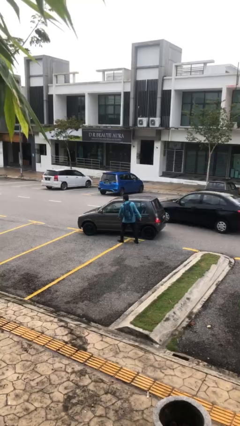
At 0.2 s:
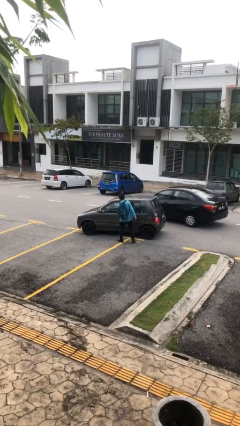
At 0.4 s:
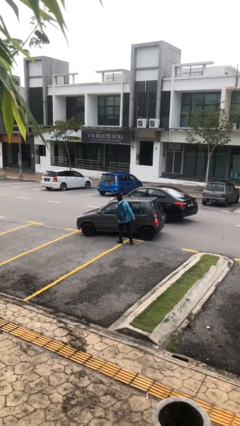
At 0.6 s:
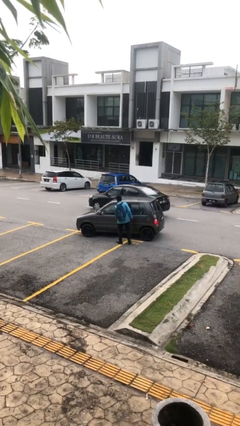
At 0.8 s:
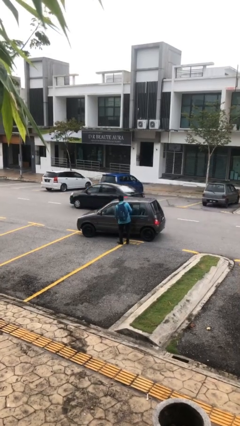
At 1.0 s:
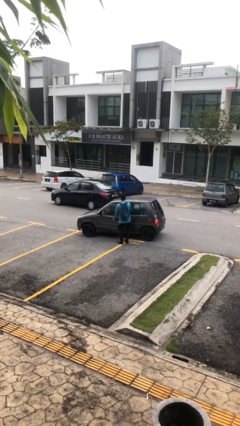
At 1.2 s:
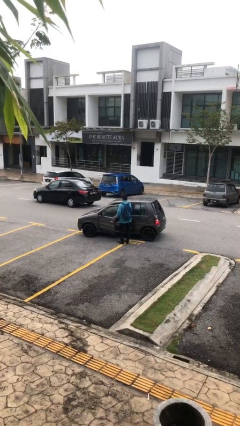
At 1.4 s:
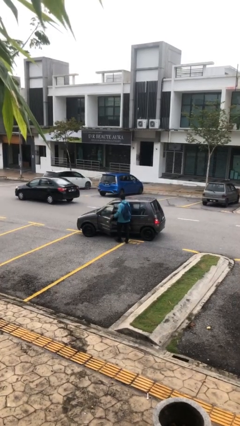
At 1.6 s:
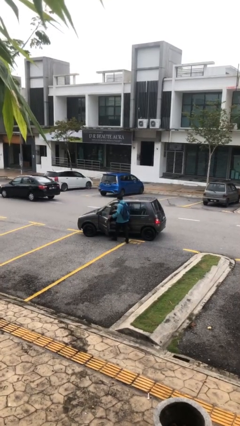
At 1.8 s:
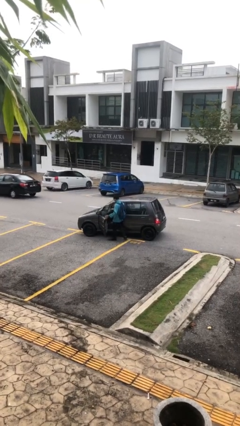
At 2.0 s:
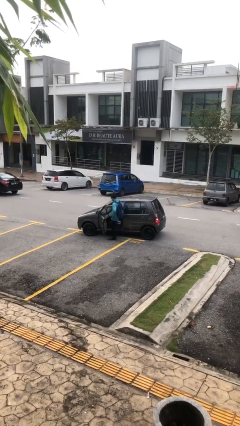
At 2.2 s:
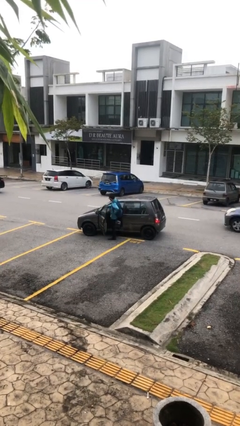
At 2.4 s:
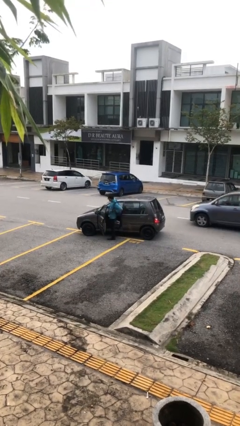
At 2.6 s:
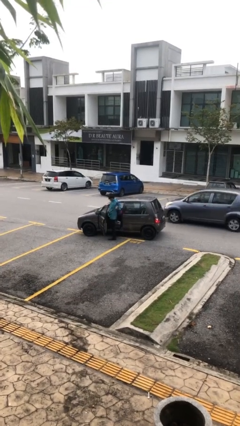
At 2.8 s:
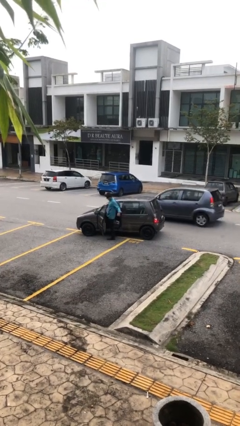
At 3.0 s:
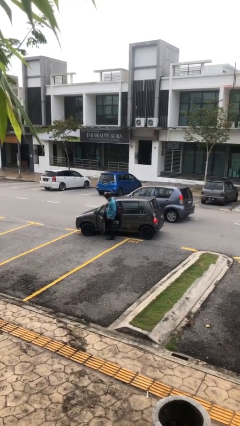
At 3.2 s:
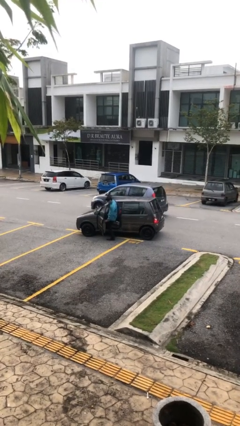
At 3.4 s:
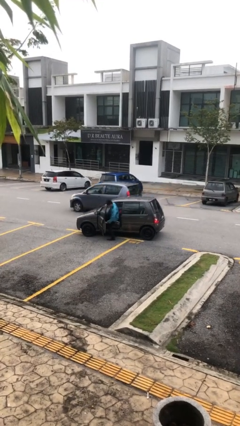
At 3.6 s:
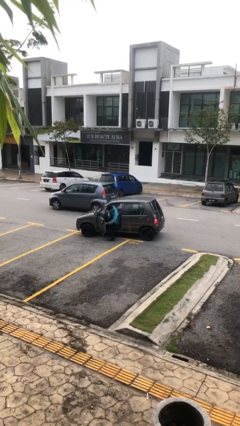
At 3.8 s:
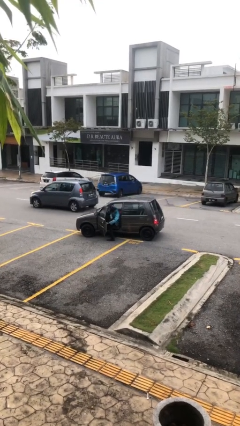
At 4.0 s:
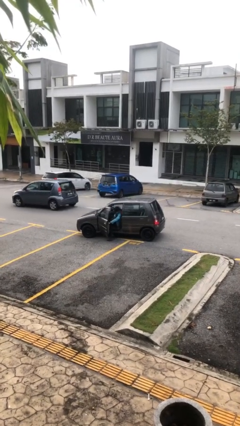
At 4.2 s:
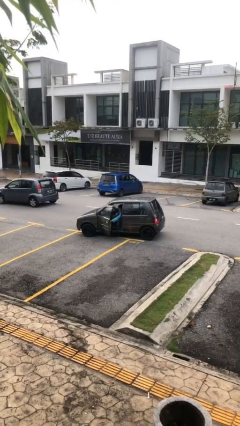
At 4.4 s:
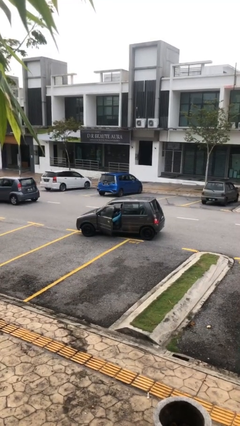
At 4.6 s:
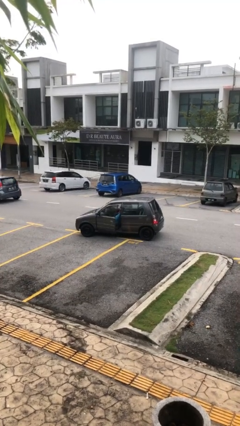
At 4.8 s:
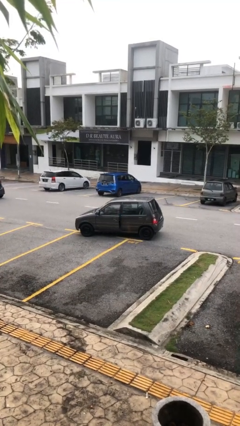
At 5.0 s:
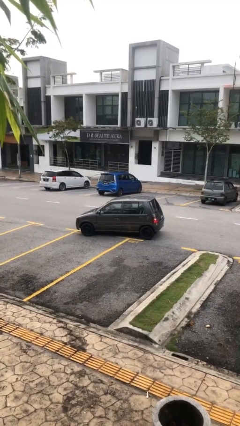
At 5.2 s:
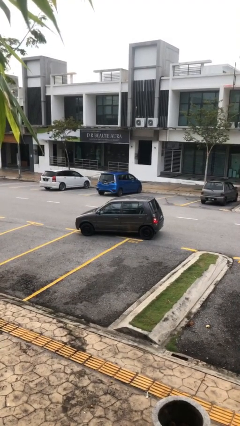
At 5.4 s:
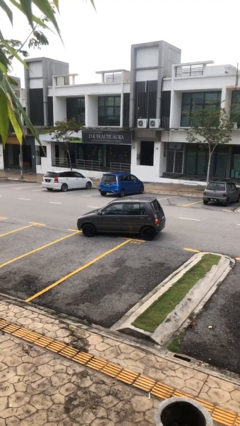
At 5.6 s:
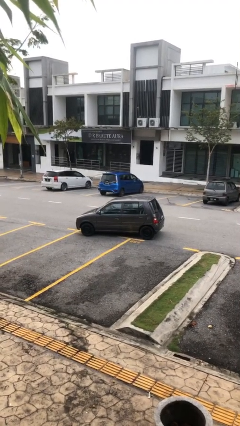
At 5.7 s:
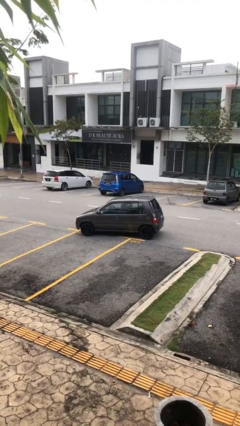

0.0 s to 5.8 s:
car picks up person

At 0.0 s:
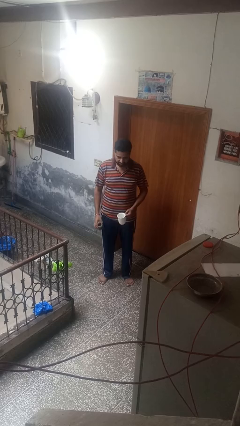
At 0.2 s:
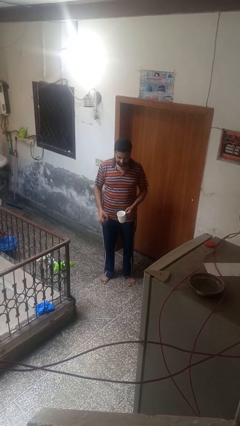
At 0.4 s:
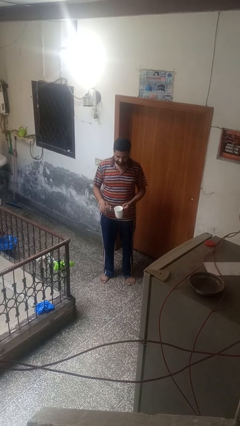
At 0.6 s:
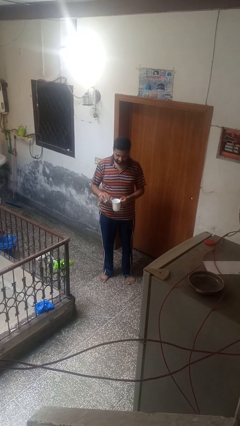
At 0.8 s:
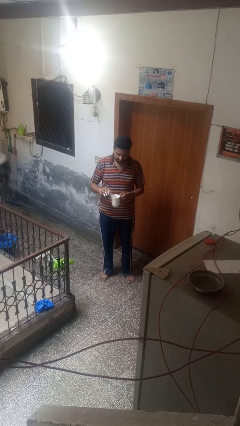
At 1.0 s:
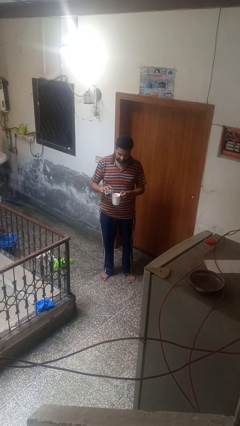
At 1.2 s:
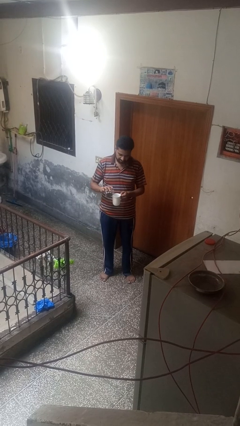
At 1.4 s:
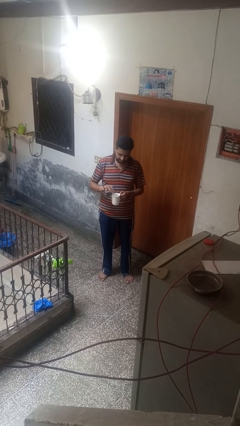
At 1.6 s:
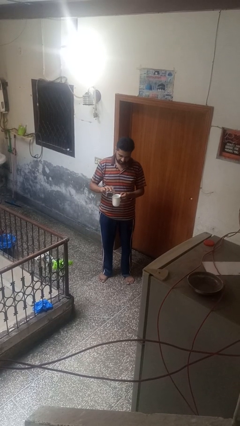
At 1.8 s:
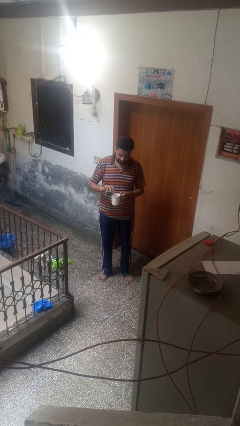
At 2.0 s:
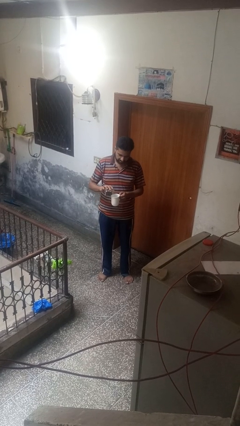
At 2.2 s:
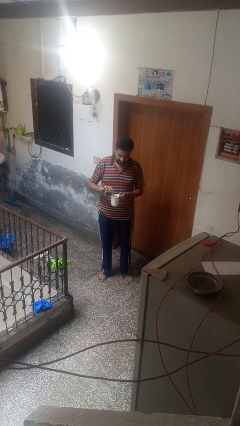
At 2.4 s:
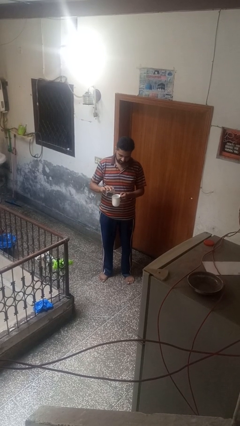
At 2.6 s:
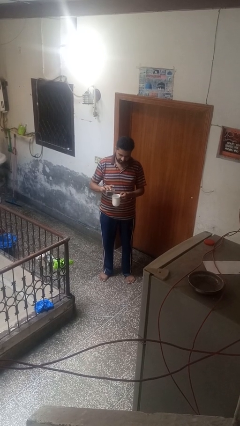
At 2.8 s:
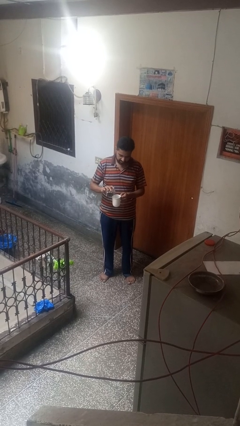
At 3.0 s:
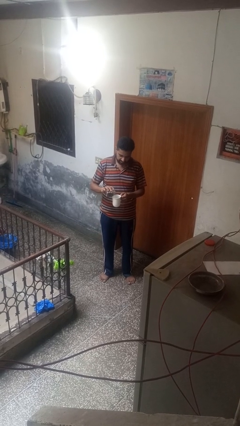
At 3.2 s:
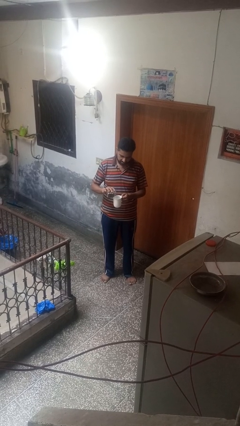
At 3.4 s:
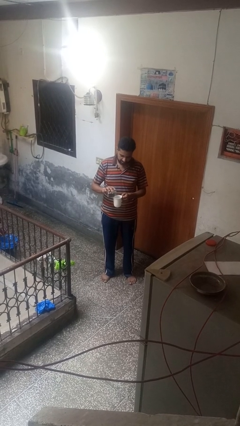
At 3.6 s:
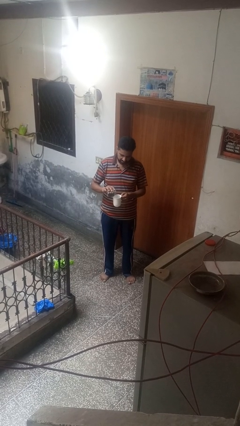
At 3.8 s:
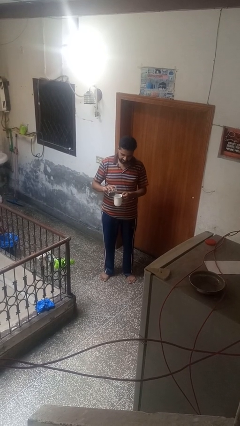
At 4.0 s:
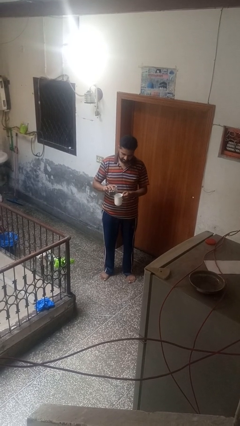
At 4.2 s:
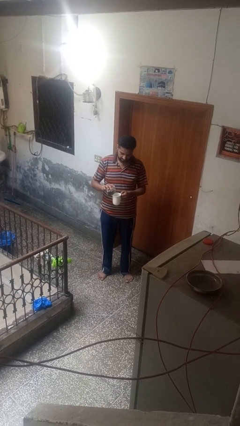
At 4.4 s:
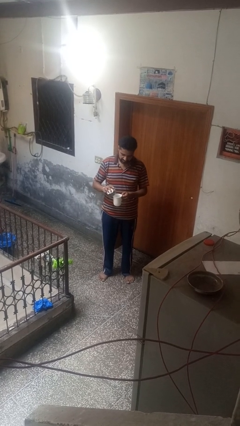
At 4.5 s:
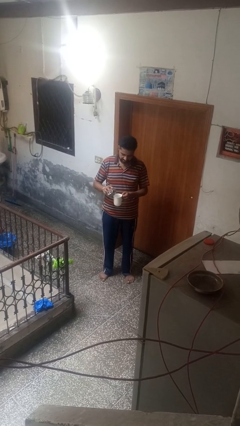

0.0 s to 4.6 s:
person pours coffee into mug

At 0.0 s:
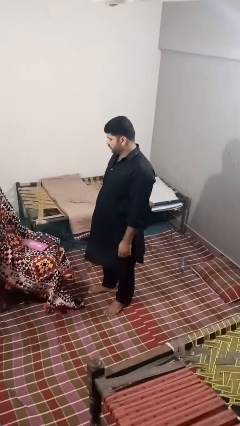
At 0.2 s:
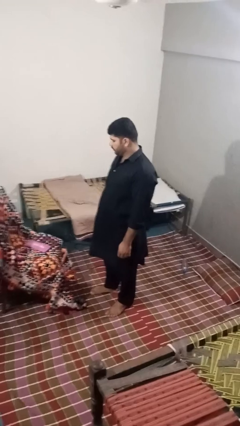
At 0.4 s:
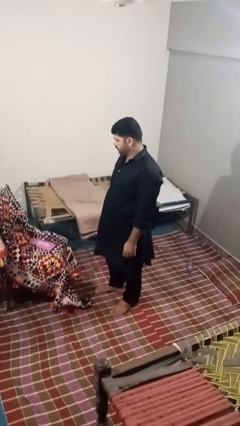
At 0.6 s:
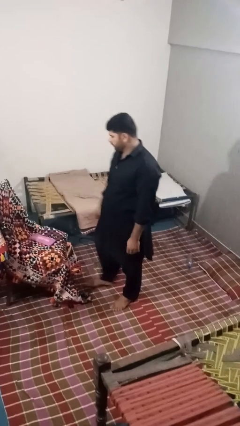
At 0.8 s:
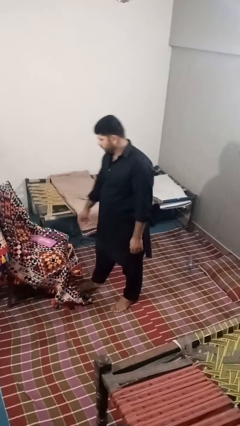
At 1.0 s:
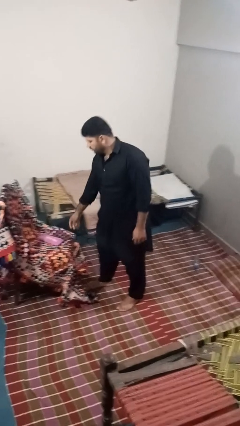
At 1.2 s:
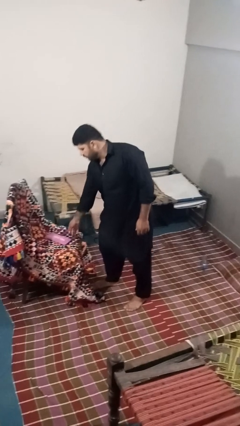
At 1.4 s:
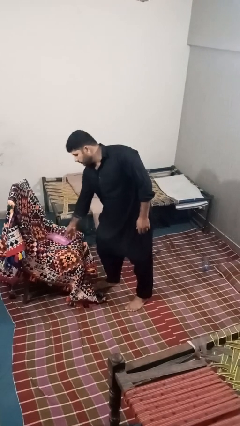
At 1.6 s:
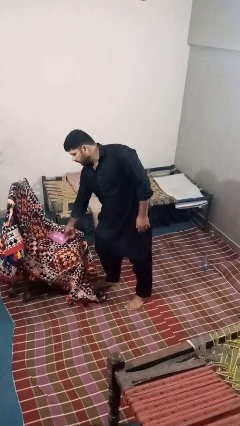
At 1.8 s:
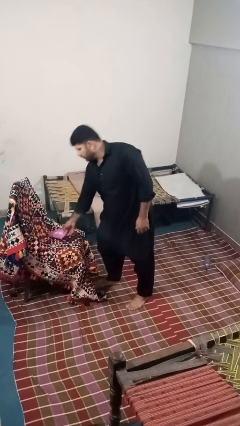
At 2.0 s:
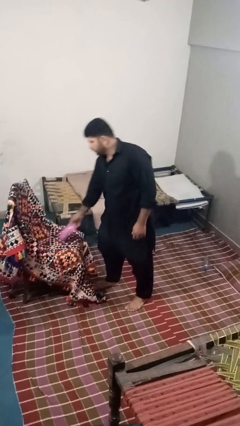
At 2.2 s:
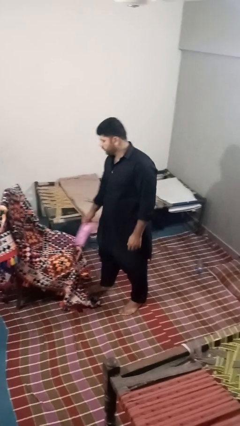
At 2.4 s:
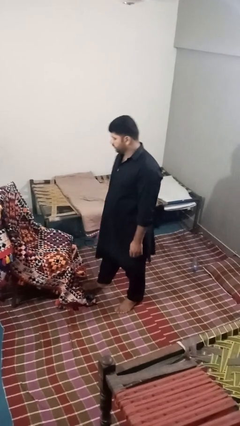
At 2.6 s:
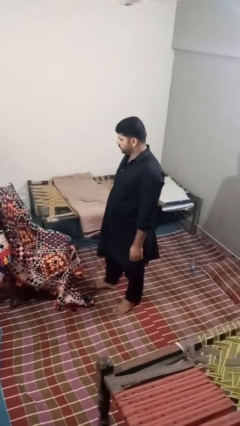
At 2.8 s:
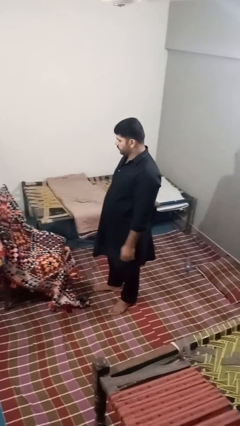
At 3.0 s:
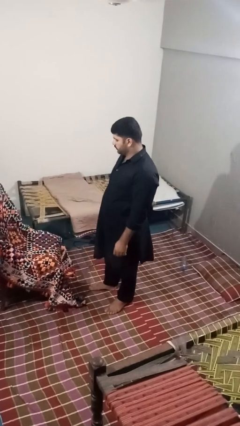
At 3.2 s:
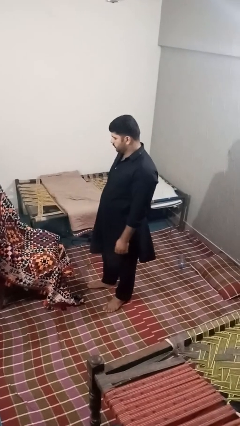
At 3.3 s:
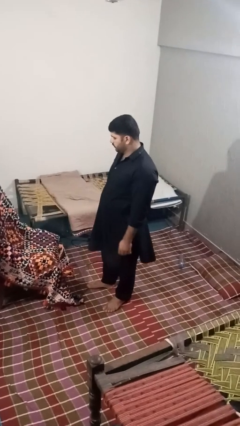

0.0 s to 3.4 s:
person picks up object from couch

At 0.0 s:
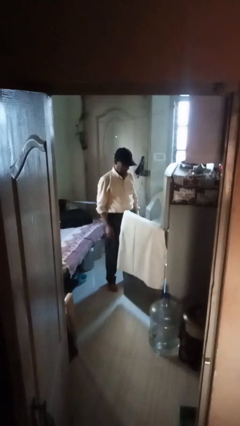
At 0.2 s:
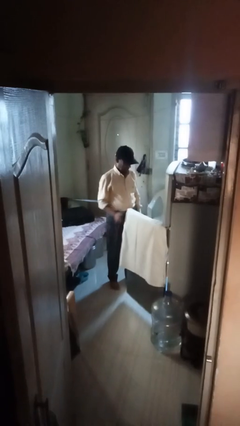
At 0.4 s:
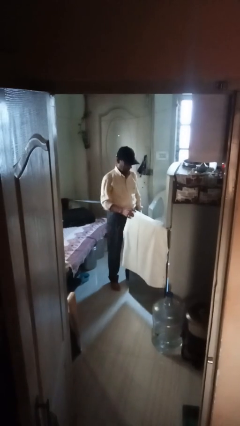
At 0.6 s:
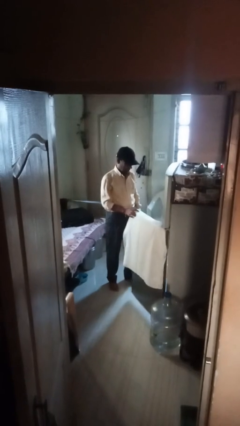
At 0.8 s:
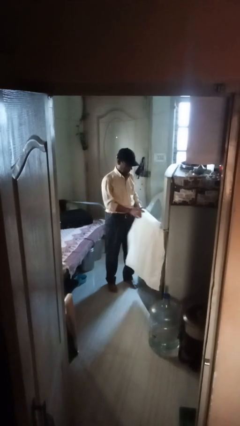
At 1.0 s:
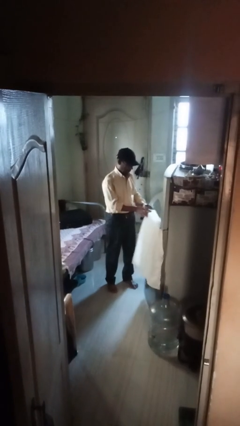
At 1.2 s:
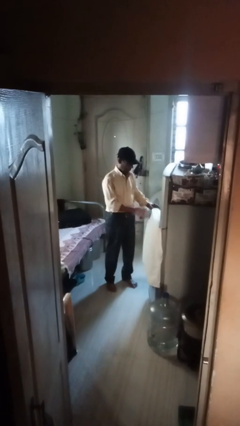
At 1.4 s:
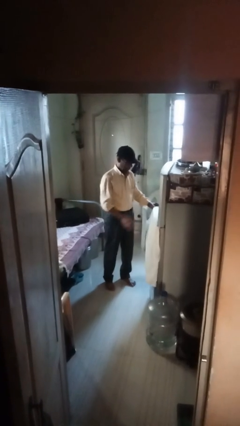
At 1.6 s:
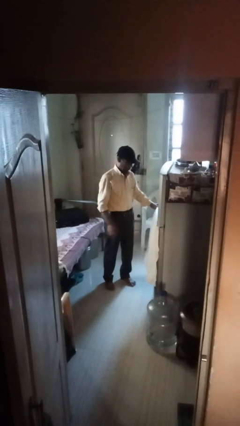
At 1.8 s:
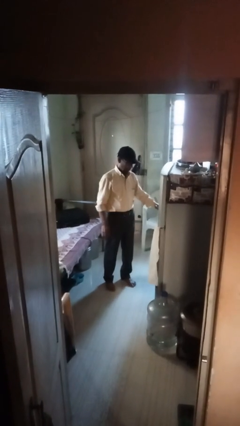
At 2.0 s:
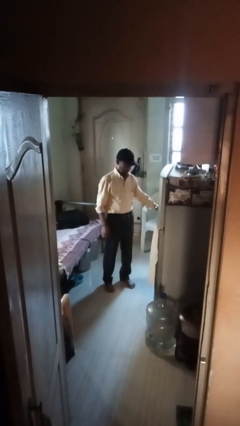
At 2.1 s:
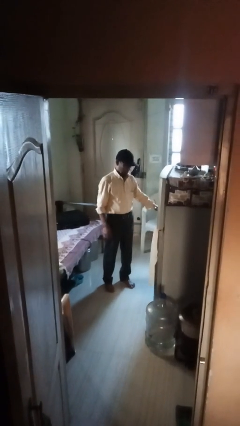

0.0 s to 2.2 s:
person closes clothes washer

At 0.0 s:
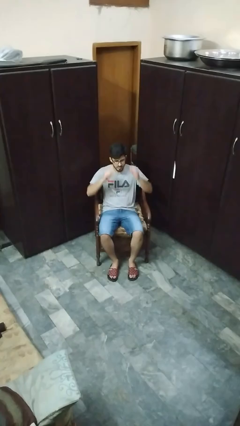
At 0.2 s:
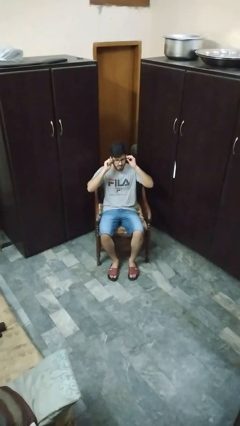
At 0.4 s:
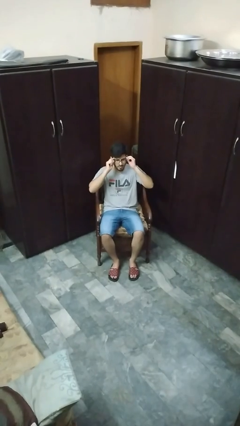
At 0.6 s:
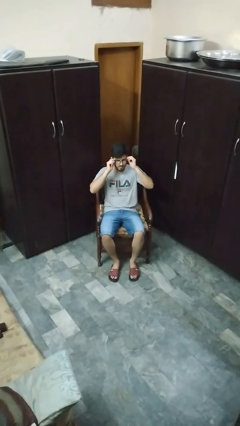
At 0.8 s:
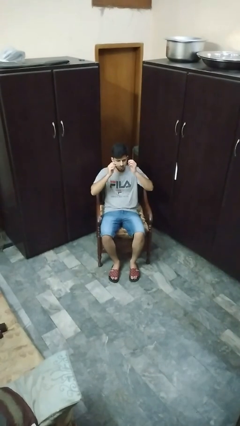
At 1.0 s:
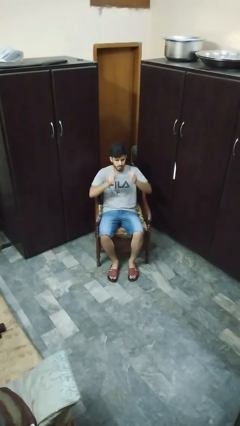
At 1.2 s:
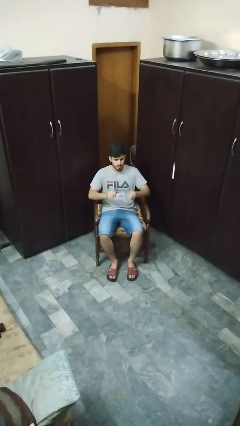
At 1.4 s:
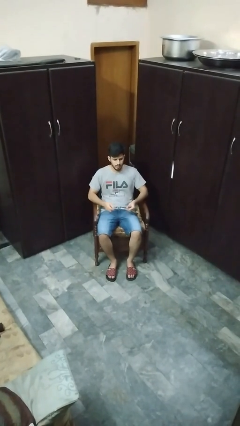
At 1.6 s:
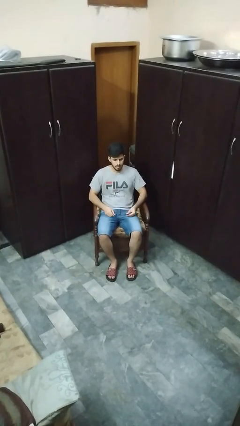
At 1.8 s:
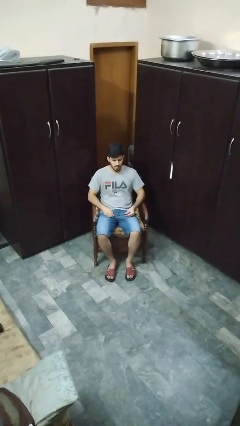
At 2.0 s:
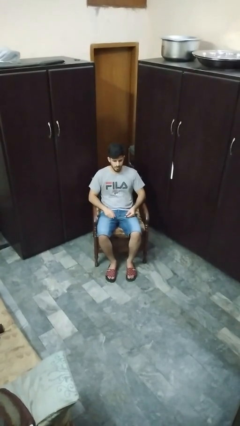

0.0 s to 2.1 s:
person takes off glasses
